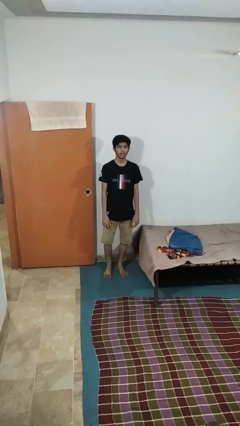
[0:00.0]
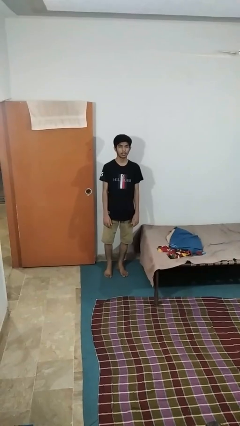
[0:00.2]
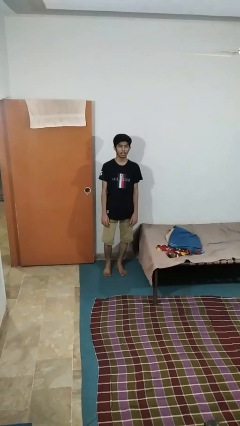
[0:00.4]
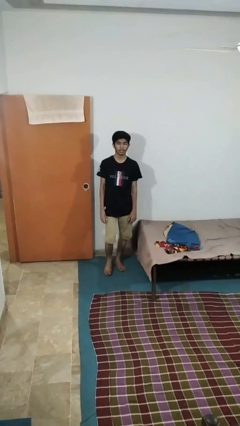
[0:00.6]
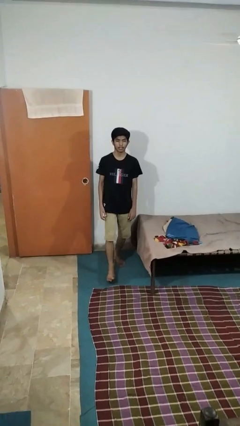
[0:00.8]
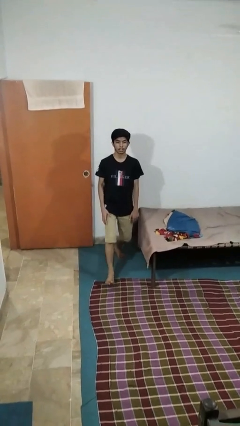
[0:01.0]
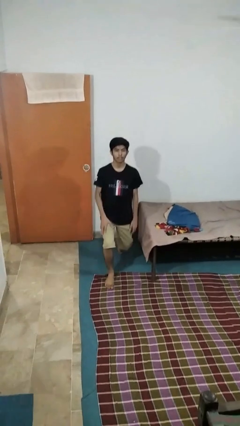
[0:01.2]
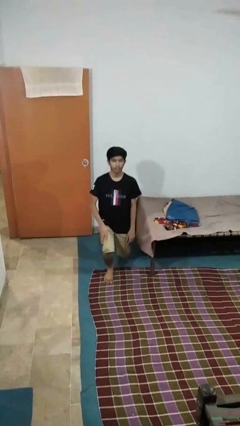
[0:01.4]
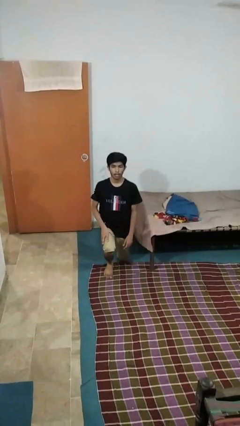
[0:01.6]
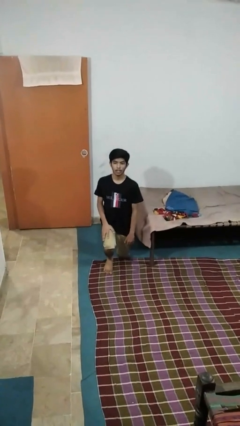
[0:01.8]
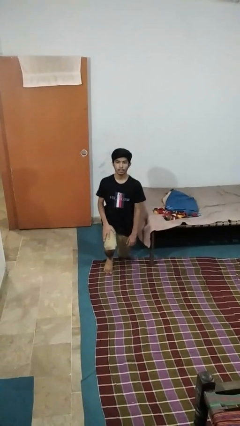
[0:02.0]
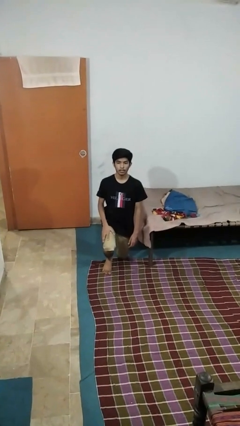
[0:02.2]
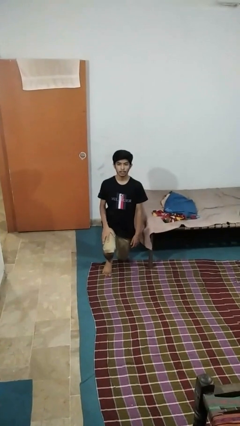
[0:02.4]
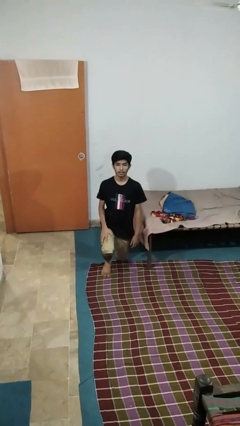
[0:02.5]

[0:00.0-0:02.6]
person kneels

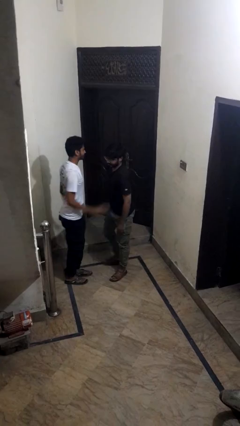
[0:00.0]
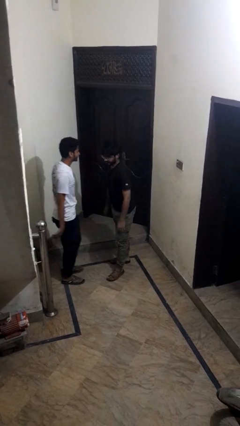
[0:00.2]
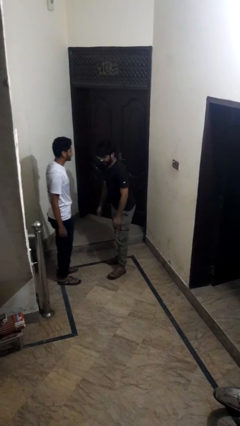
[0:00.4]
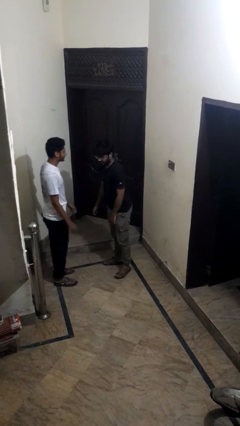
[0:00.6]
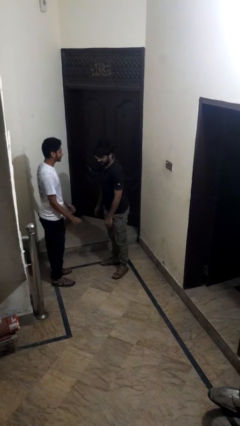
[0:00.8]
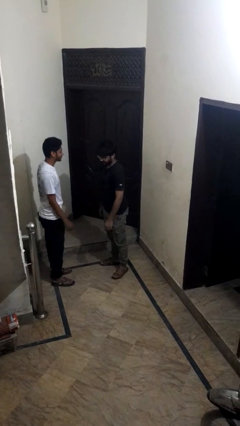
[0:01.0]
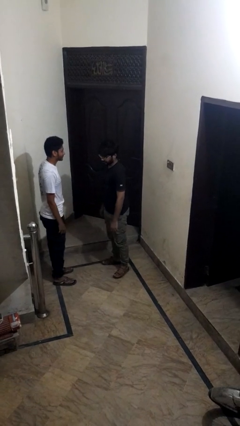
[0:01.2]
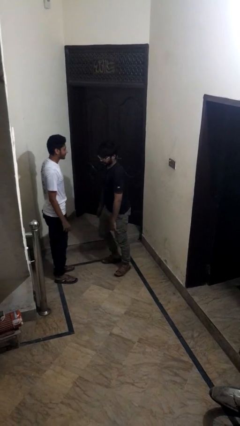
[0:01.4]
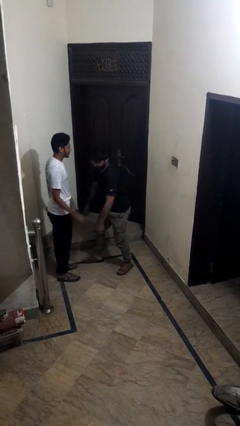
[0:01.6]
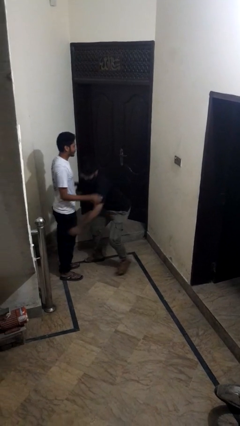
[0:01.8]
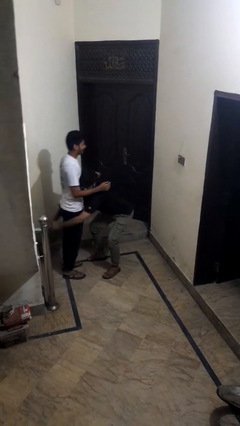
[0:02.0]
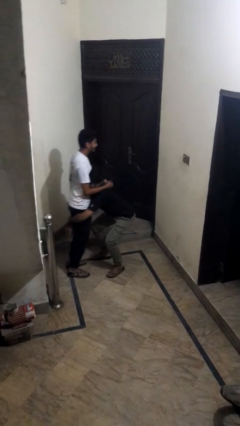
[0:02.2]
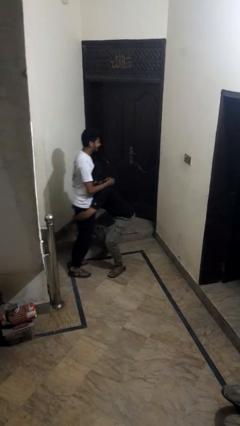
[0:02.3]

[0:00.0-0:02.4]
person puts on hat

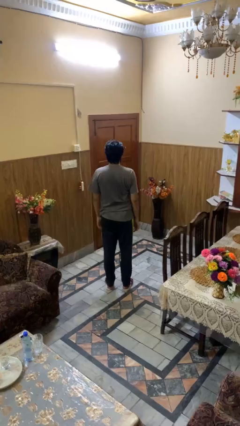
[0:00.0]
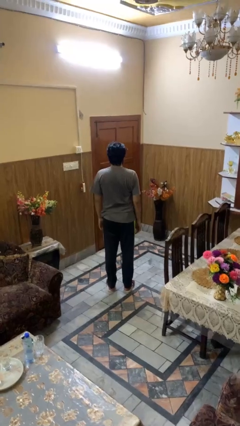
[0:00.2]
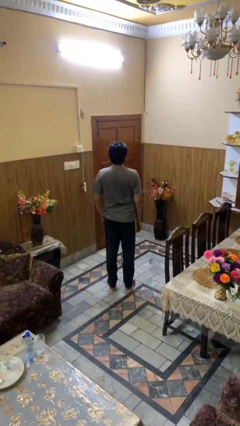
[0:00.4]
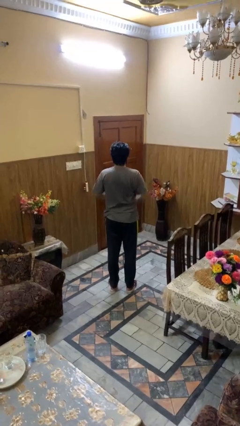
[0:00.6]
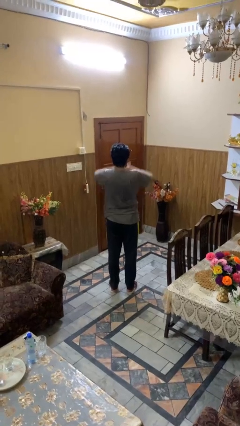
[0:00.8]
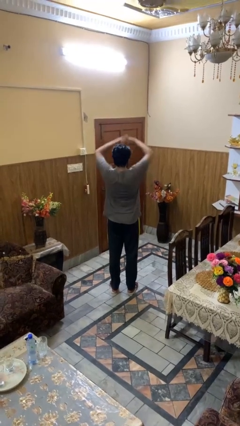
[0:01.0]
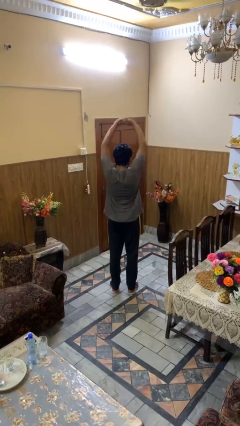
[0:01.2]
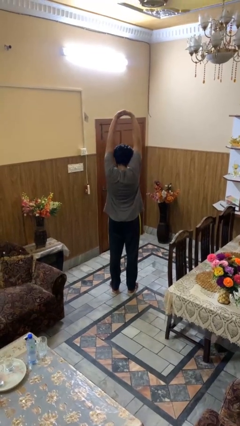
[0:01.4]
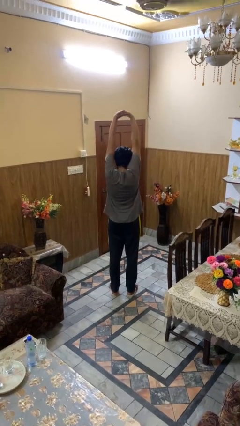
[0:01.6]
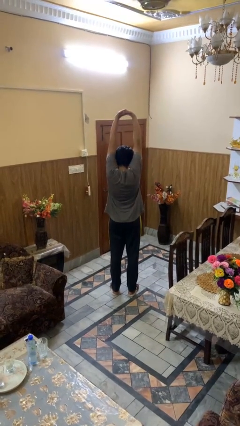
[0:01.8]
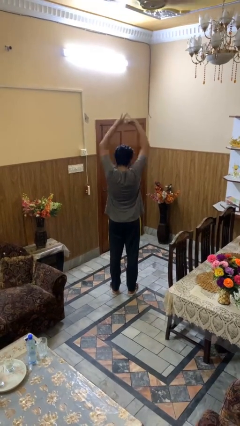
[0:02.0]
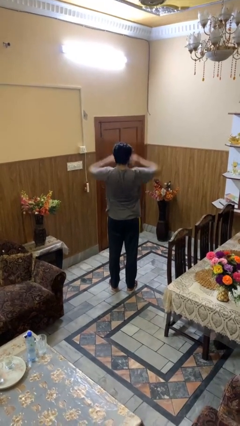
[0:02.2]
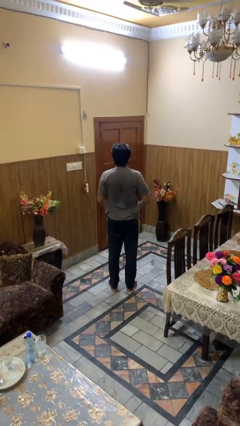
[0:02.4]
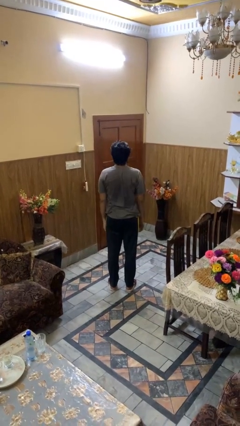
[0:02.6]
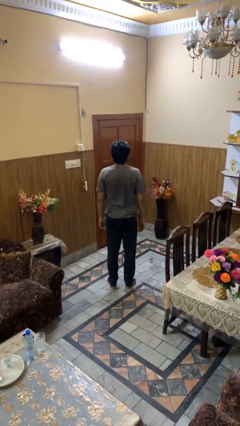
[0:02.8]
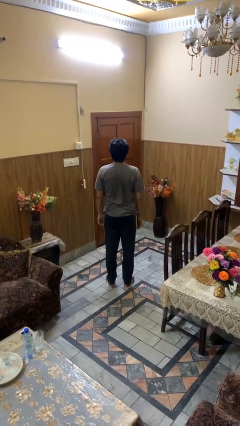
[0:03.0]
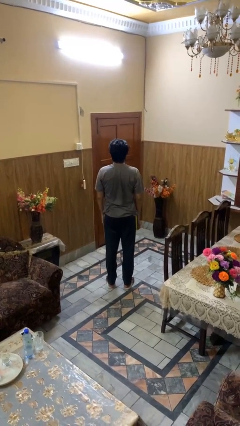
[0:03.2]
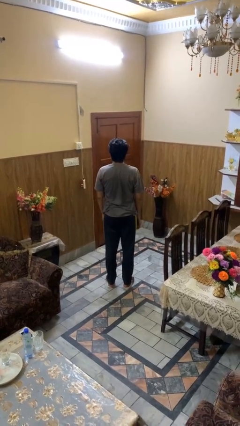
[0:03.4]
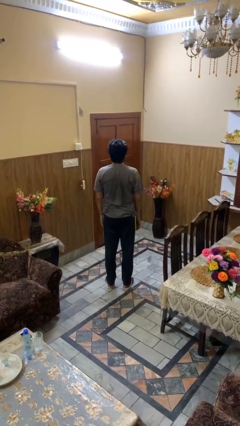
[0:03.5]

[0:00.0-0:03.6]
person stretches arms over head

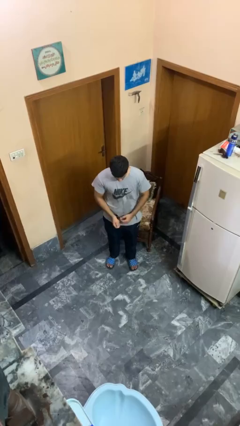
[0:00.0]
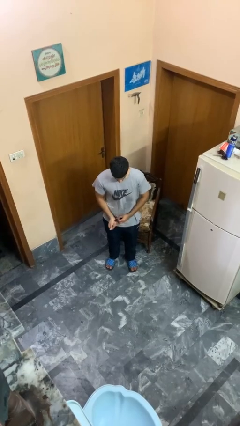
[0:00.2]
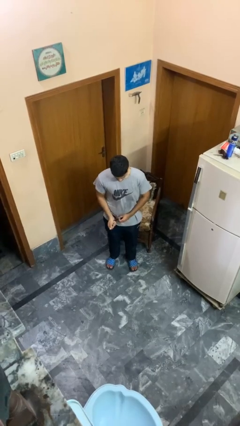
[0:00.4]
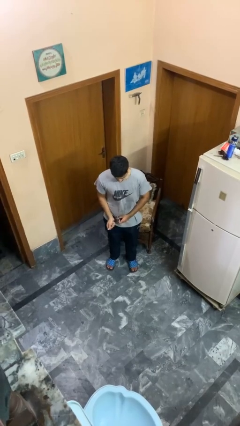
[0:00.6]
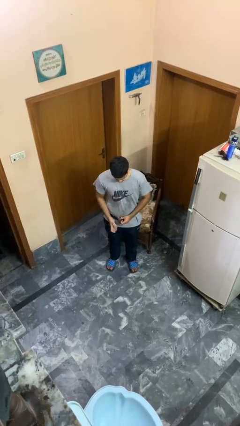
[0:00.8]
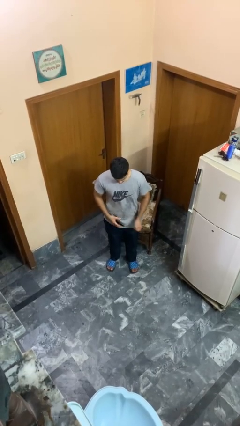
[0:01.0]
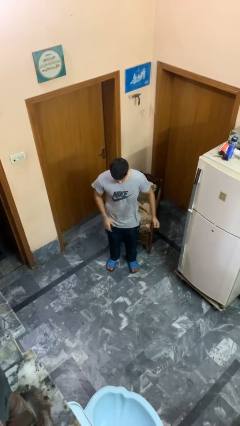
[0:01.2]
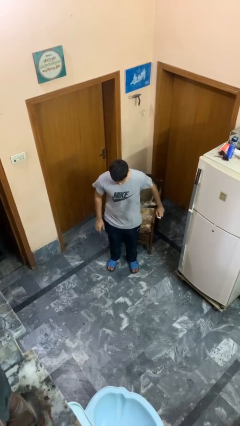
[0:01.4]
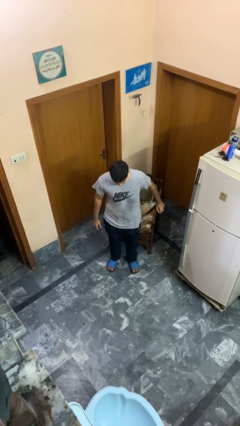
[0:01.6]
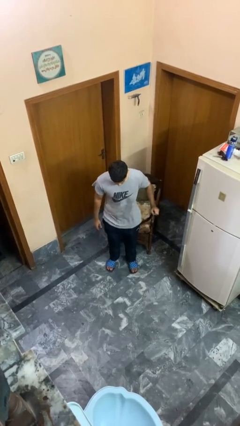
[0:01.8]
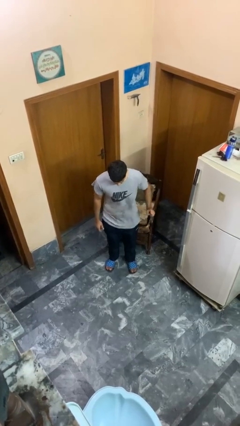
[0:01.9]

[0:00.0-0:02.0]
person takes off belt

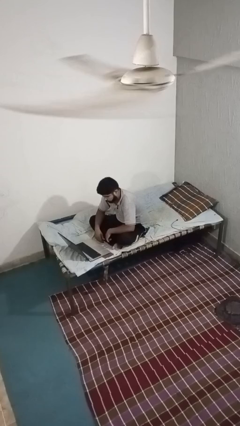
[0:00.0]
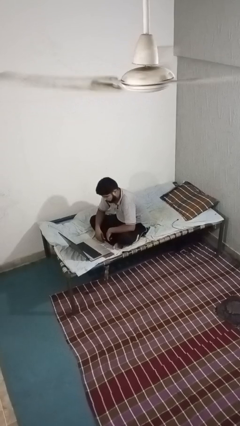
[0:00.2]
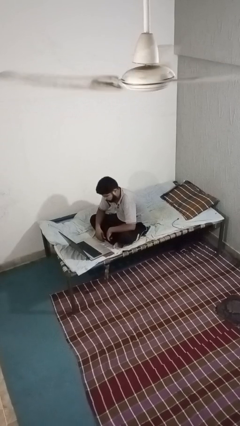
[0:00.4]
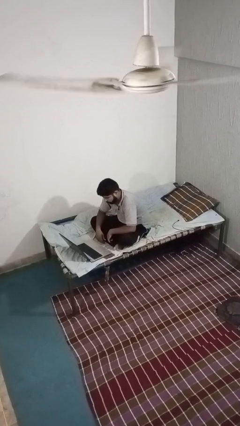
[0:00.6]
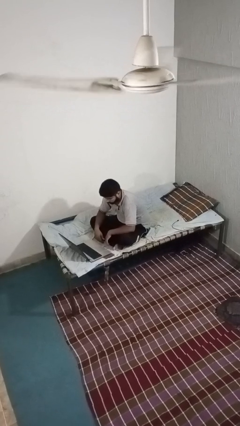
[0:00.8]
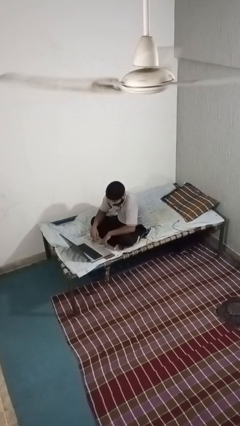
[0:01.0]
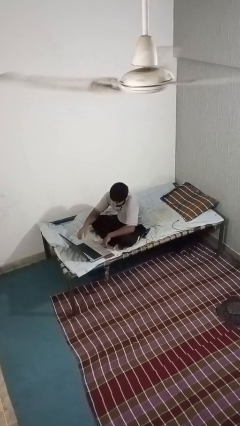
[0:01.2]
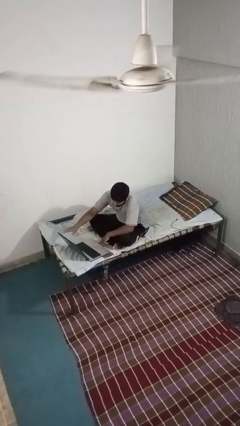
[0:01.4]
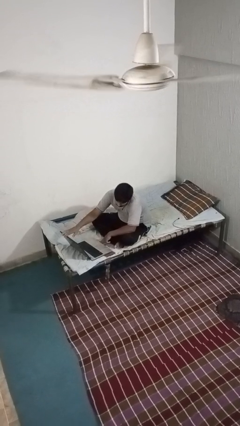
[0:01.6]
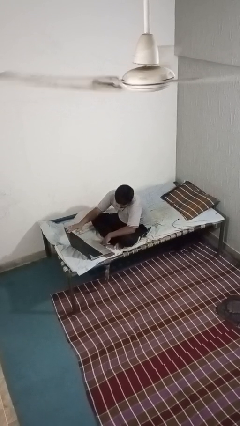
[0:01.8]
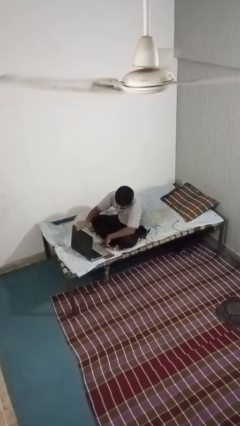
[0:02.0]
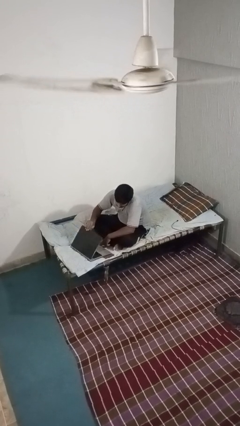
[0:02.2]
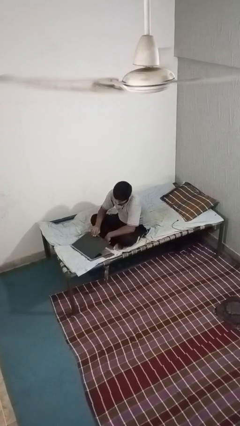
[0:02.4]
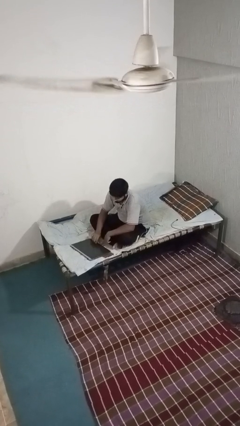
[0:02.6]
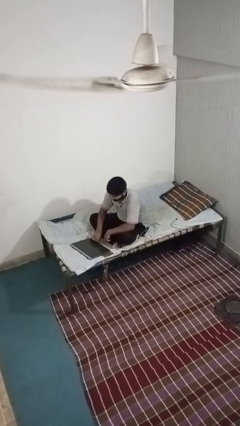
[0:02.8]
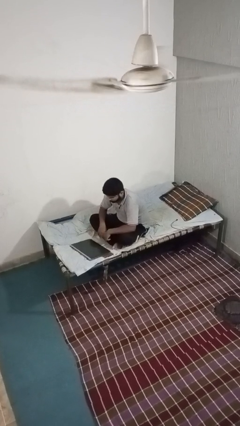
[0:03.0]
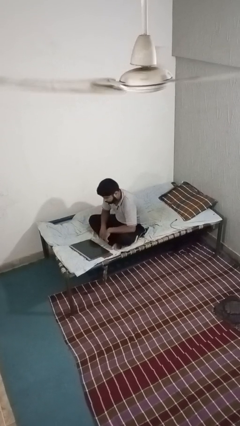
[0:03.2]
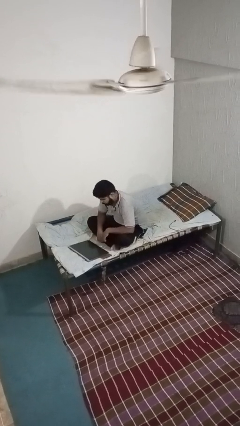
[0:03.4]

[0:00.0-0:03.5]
person closes laptop

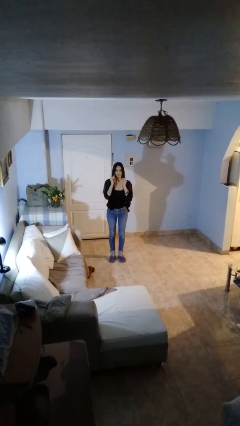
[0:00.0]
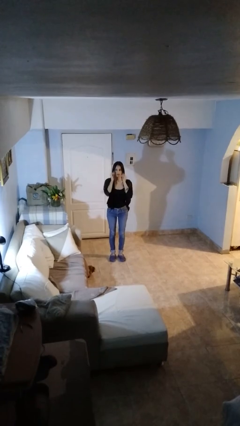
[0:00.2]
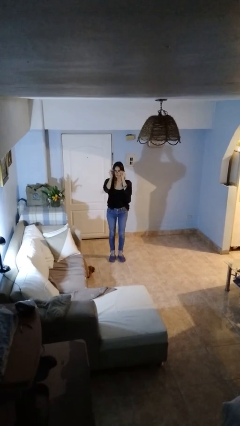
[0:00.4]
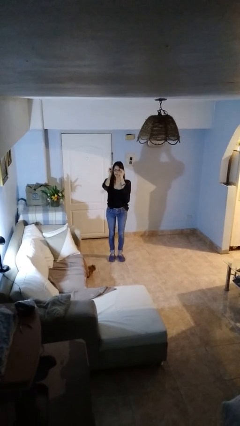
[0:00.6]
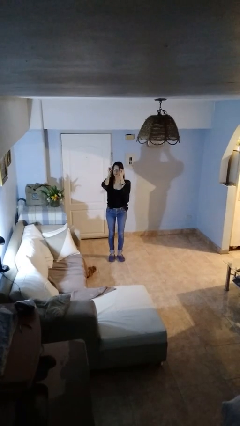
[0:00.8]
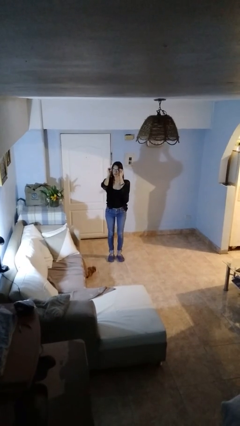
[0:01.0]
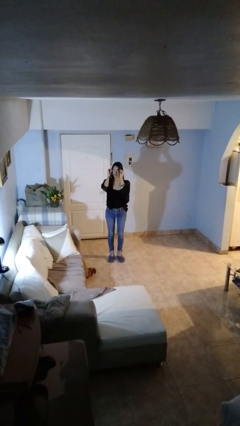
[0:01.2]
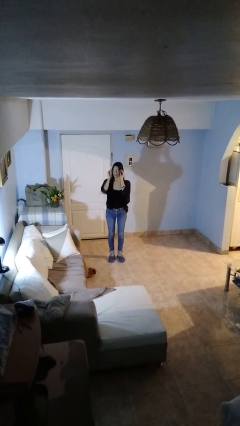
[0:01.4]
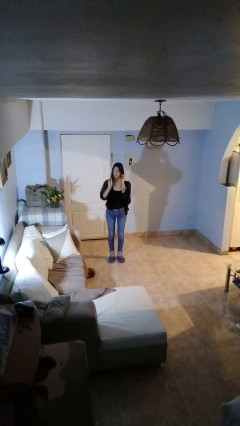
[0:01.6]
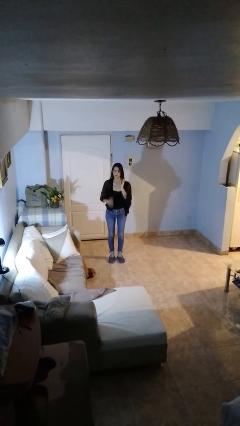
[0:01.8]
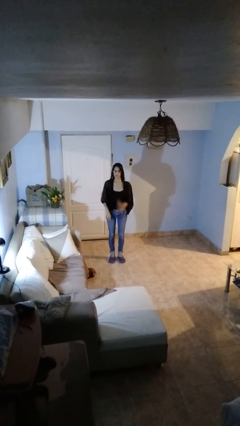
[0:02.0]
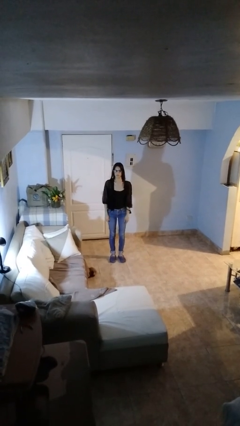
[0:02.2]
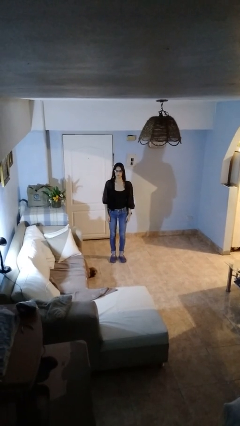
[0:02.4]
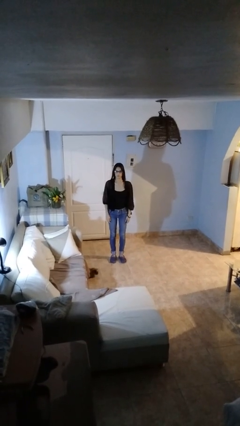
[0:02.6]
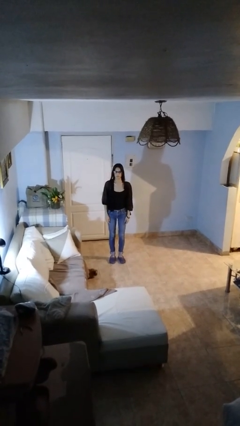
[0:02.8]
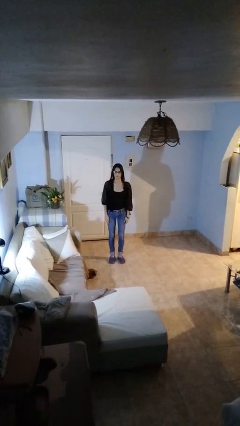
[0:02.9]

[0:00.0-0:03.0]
person puts on glasses

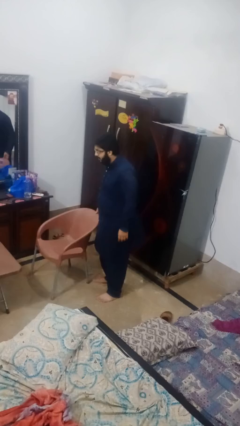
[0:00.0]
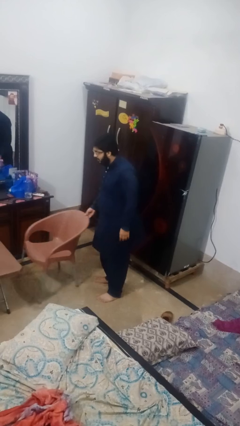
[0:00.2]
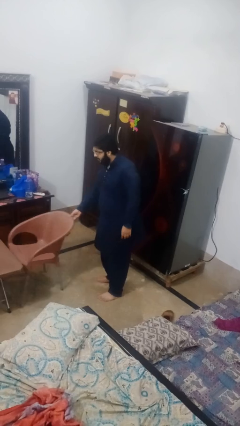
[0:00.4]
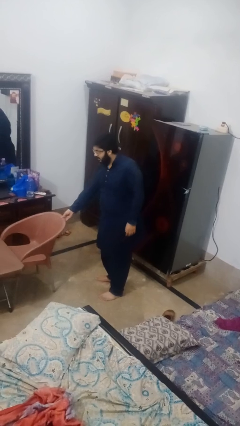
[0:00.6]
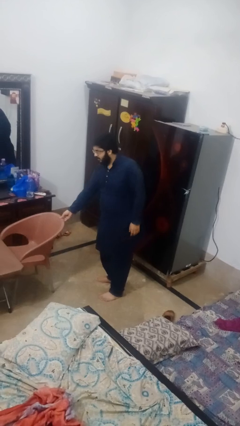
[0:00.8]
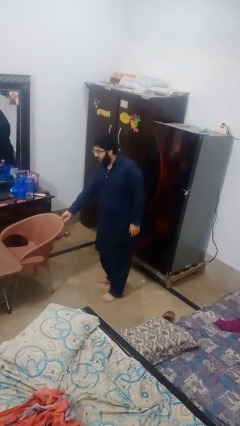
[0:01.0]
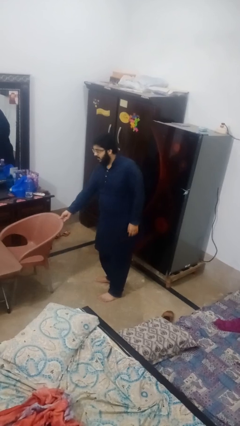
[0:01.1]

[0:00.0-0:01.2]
person pushes in chair
